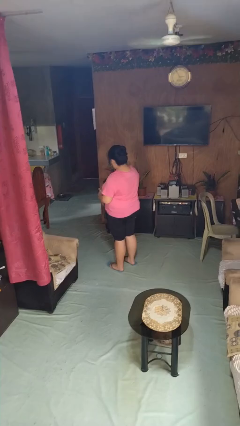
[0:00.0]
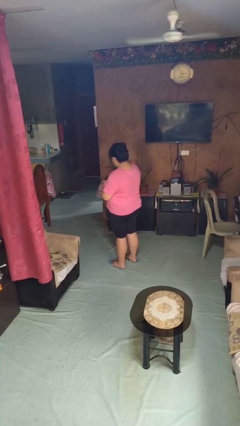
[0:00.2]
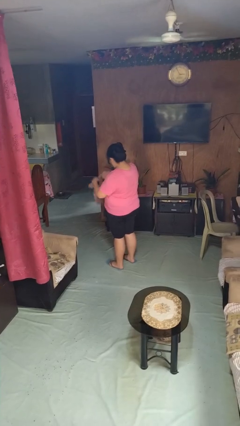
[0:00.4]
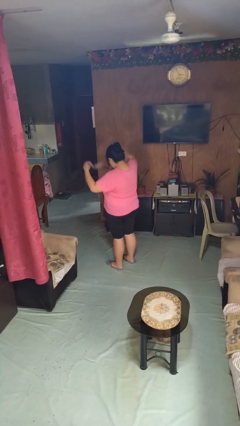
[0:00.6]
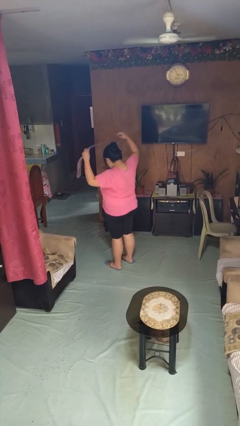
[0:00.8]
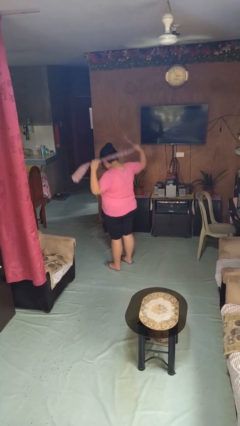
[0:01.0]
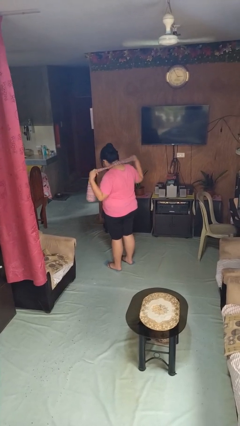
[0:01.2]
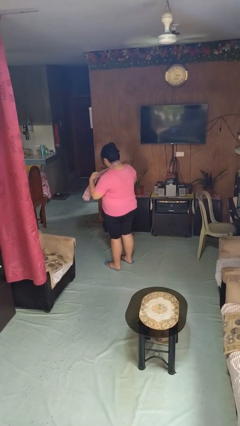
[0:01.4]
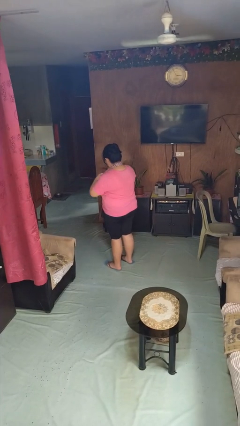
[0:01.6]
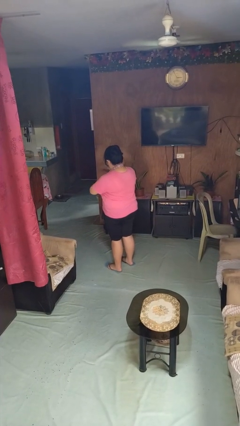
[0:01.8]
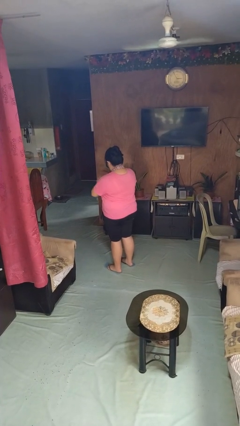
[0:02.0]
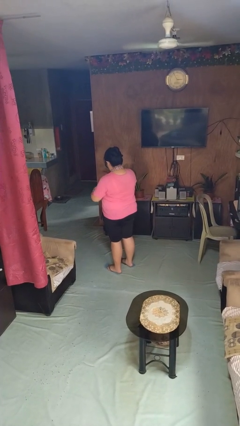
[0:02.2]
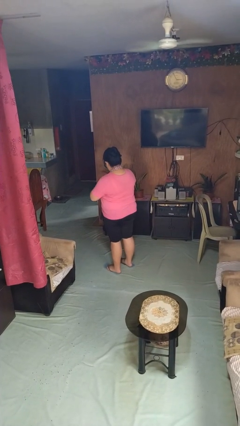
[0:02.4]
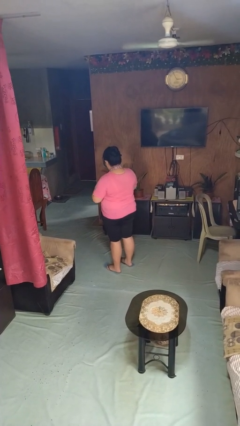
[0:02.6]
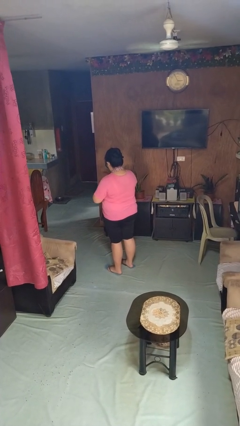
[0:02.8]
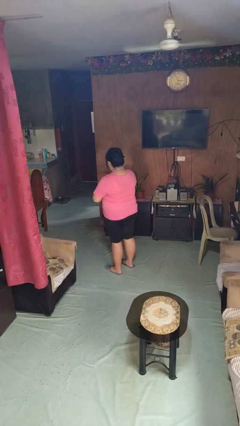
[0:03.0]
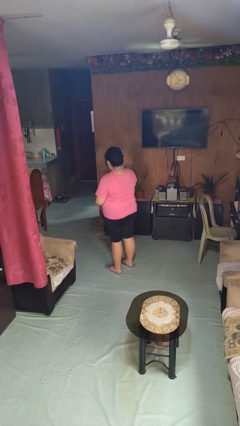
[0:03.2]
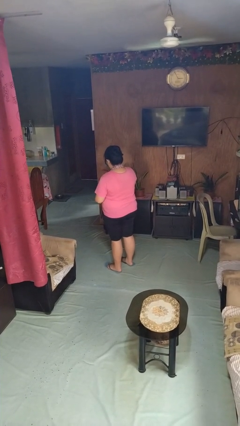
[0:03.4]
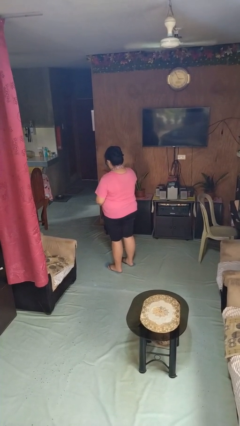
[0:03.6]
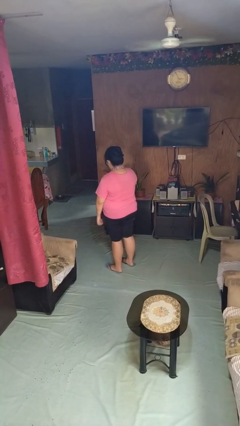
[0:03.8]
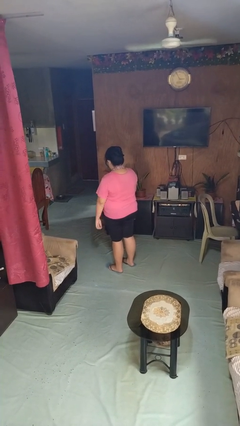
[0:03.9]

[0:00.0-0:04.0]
person puts on necktie

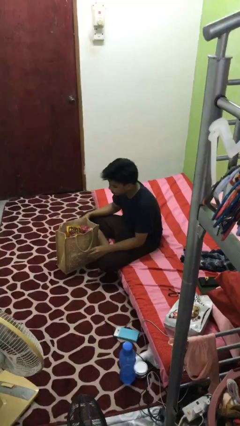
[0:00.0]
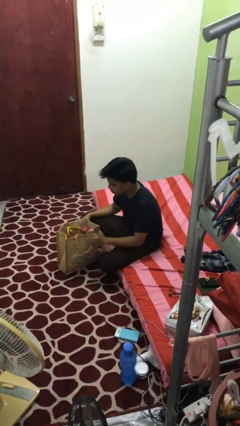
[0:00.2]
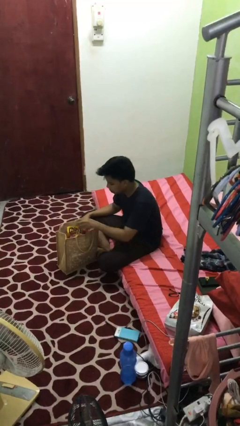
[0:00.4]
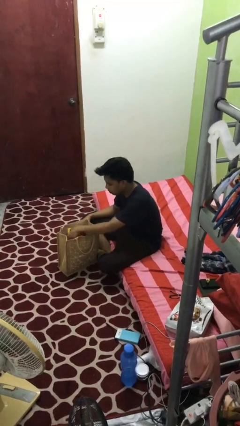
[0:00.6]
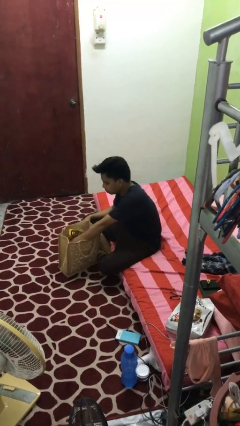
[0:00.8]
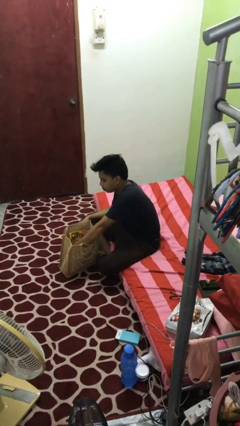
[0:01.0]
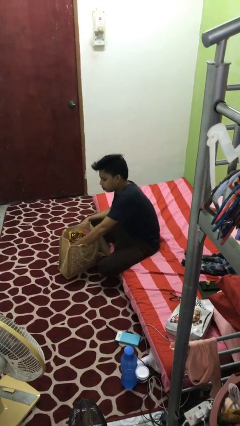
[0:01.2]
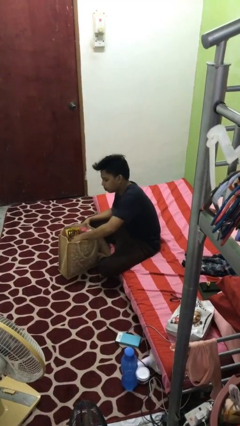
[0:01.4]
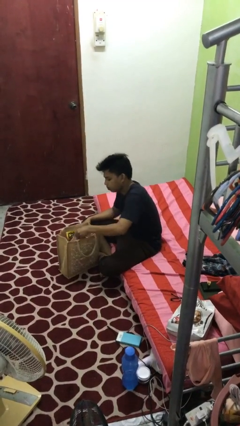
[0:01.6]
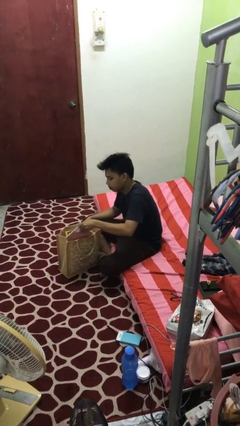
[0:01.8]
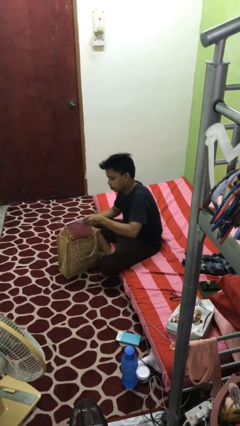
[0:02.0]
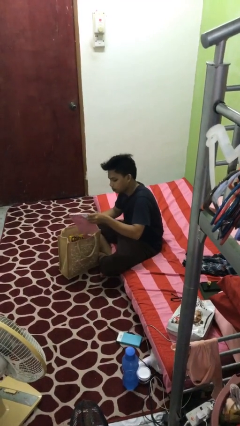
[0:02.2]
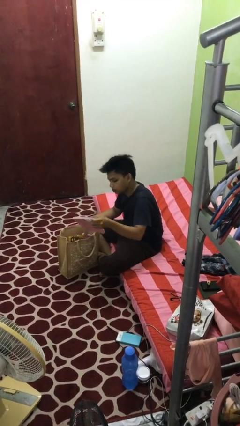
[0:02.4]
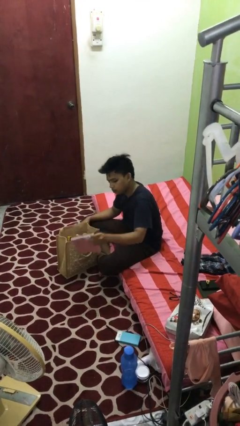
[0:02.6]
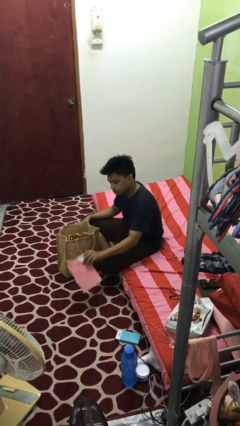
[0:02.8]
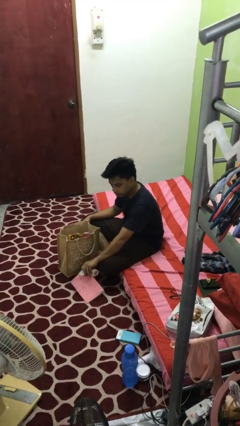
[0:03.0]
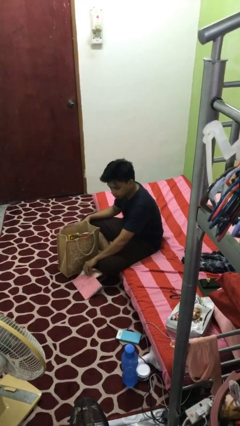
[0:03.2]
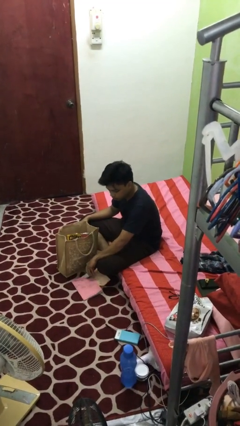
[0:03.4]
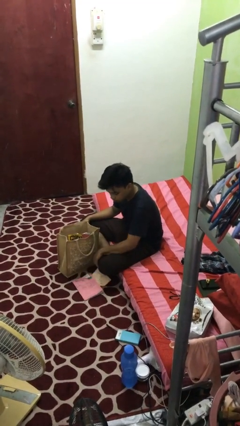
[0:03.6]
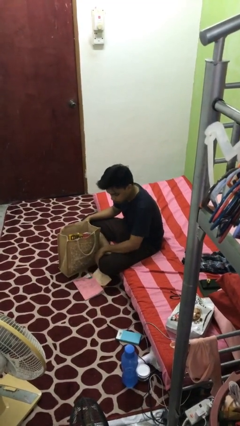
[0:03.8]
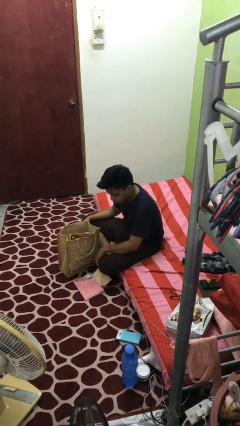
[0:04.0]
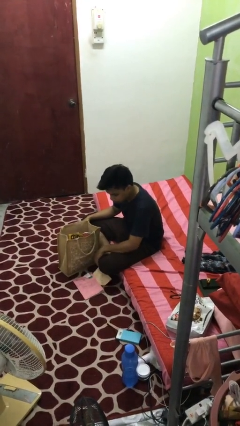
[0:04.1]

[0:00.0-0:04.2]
person takes object from bag

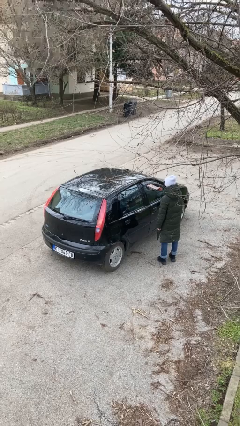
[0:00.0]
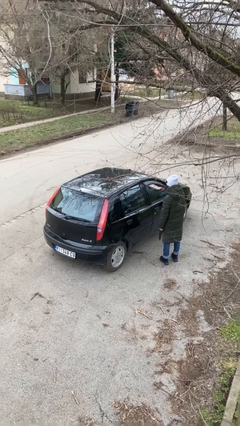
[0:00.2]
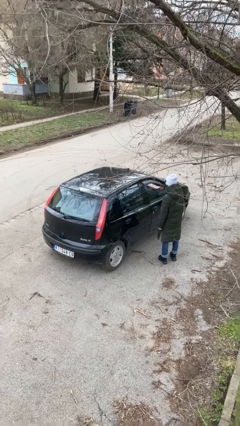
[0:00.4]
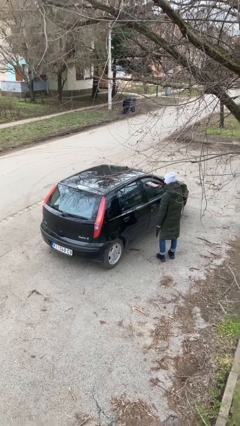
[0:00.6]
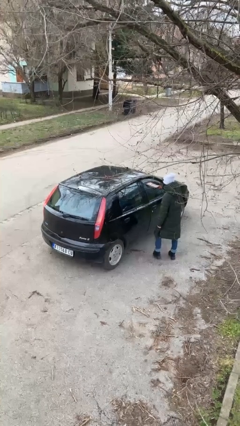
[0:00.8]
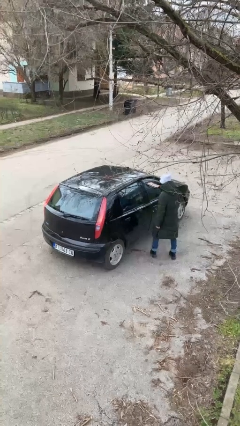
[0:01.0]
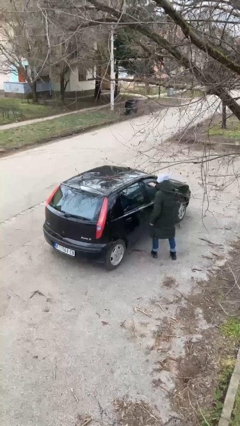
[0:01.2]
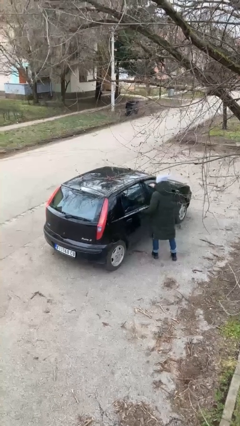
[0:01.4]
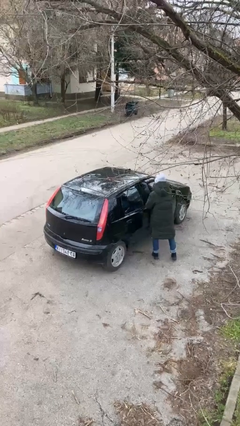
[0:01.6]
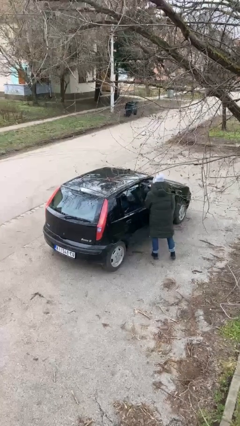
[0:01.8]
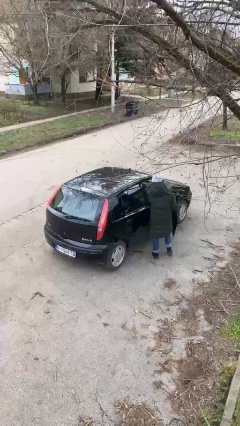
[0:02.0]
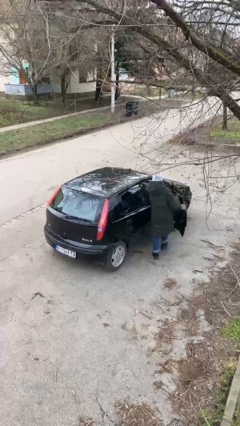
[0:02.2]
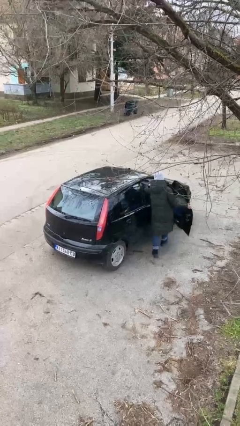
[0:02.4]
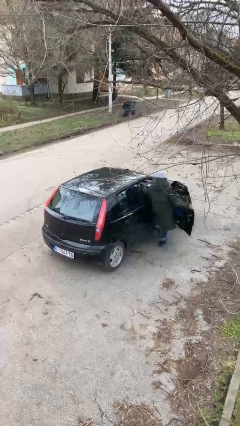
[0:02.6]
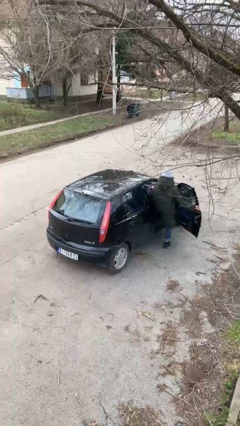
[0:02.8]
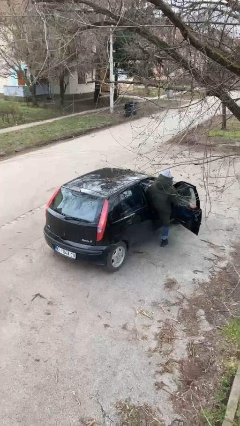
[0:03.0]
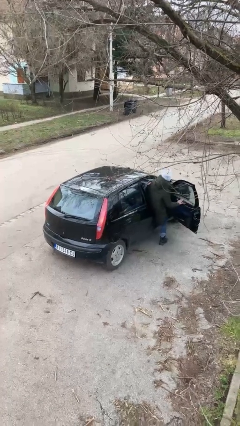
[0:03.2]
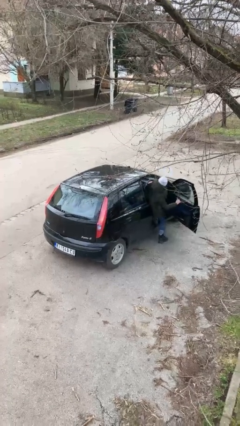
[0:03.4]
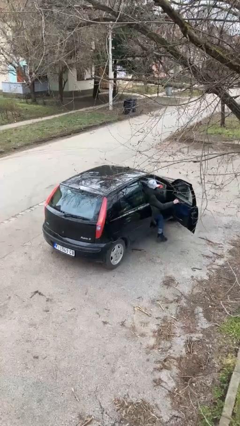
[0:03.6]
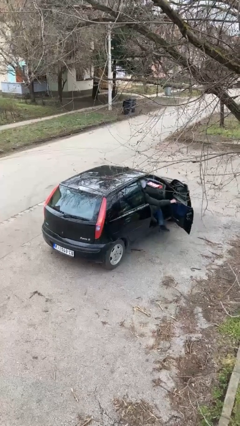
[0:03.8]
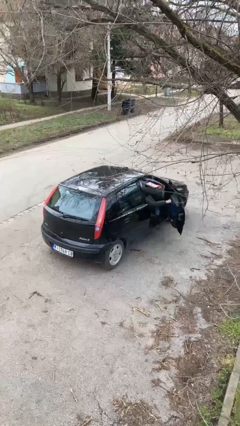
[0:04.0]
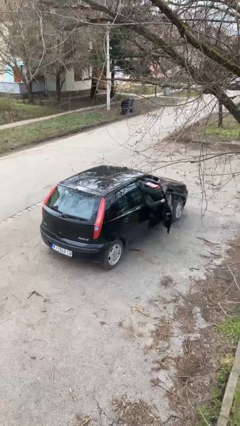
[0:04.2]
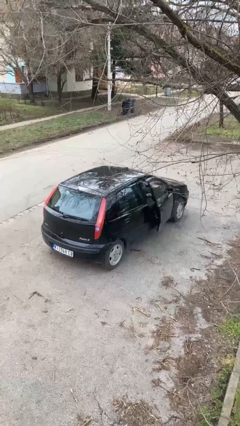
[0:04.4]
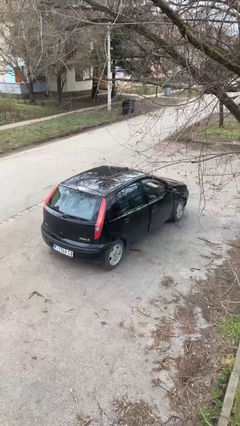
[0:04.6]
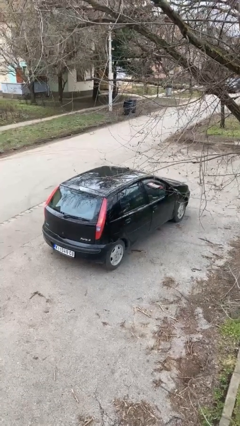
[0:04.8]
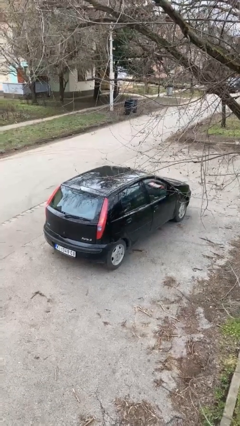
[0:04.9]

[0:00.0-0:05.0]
car picks up person

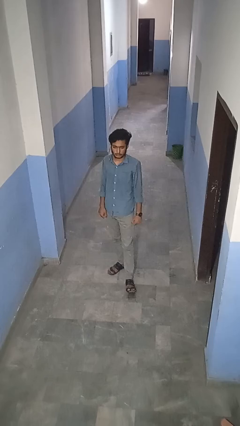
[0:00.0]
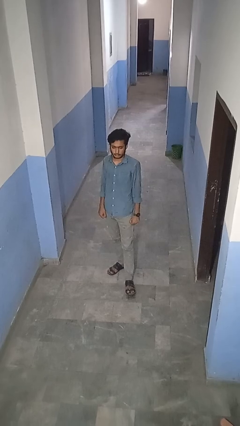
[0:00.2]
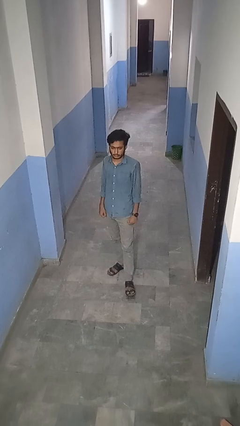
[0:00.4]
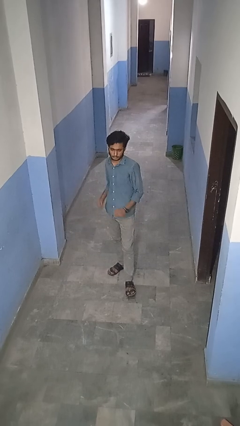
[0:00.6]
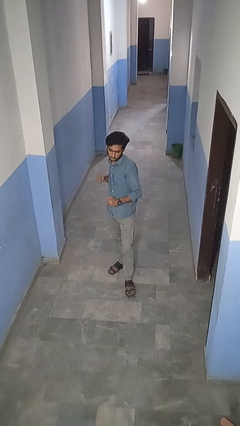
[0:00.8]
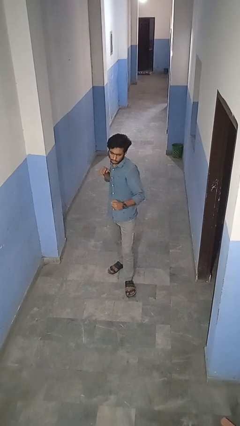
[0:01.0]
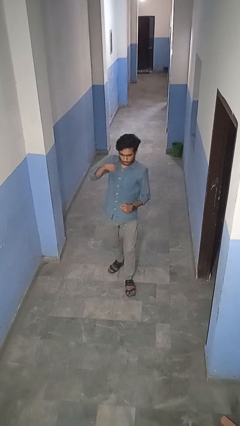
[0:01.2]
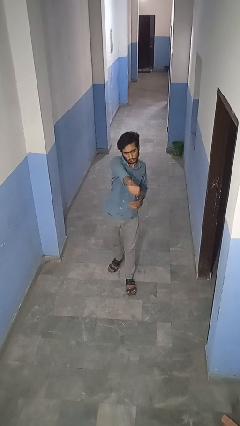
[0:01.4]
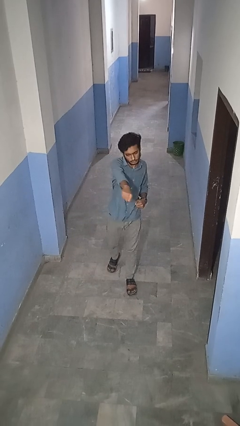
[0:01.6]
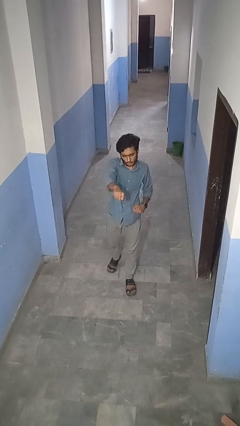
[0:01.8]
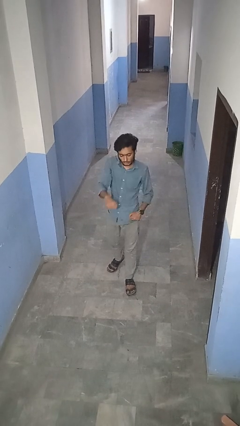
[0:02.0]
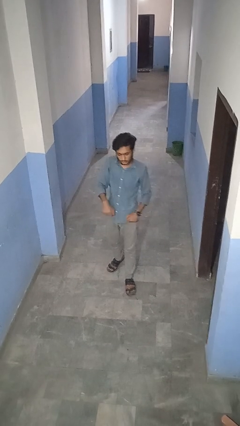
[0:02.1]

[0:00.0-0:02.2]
person punches

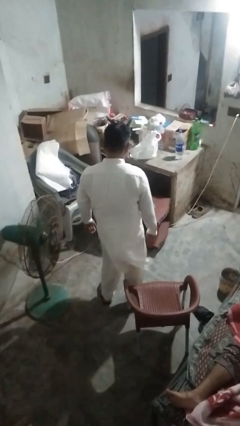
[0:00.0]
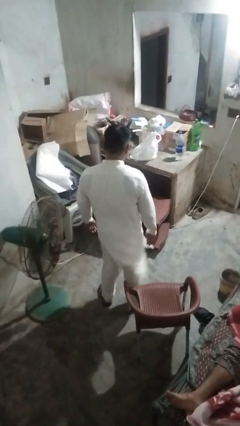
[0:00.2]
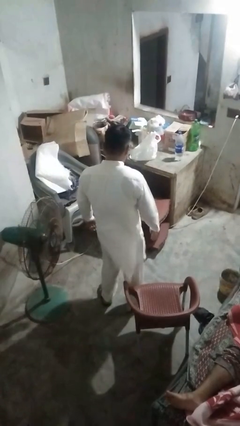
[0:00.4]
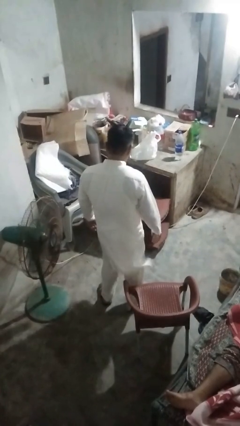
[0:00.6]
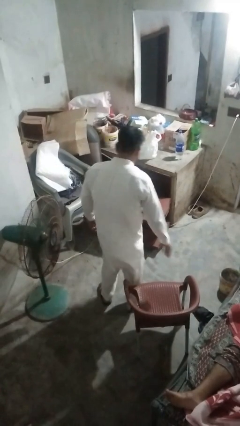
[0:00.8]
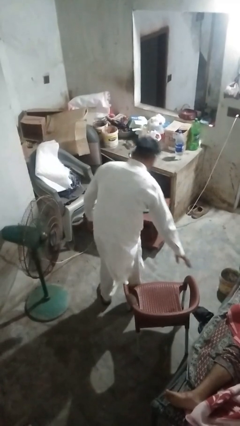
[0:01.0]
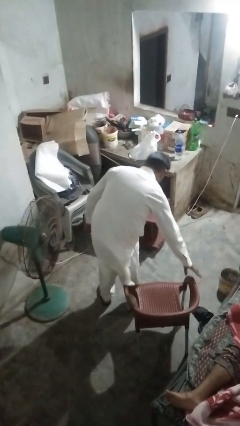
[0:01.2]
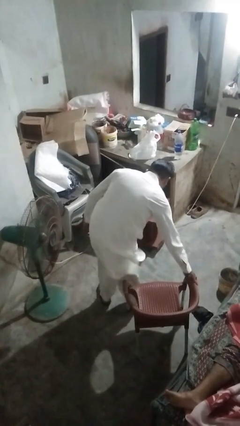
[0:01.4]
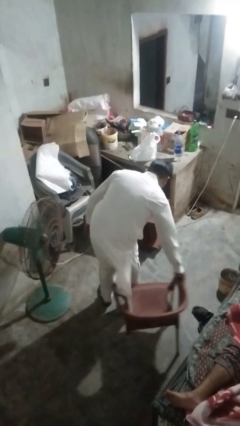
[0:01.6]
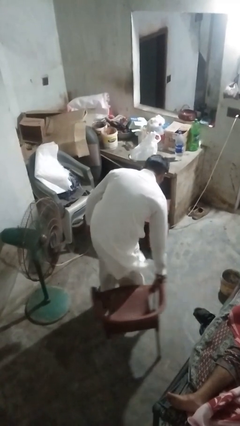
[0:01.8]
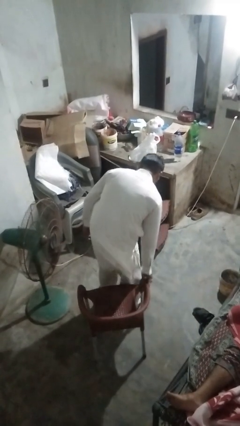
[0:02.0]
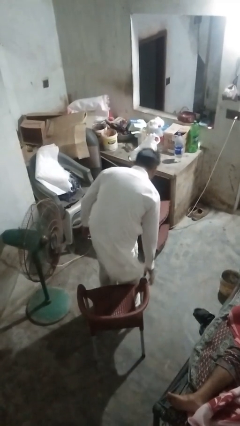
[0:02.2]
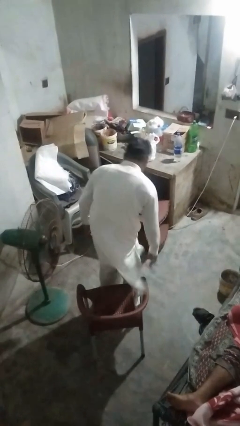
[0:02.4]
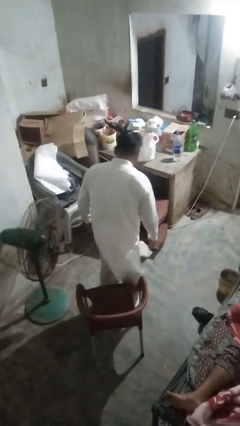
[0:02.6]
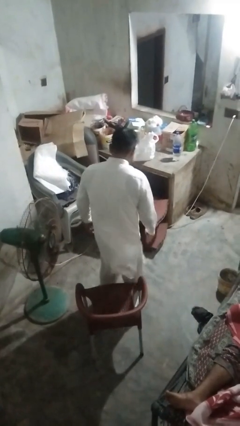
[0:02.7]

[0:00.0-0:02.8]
person pulls out chair
